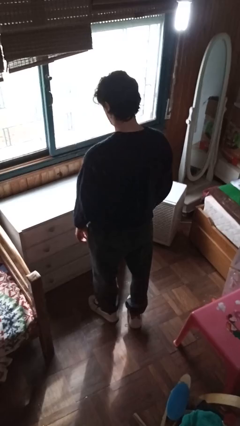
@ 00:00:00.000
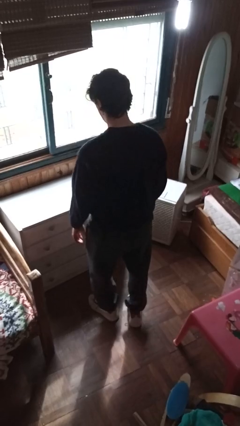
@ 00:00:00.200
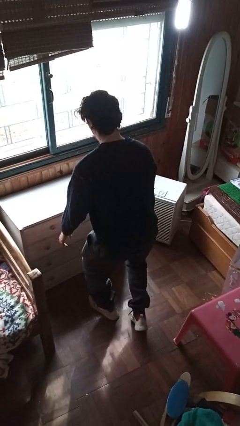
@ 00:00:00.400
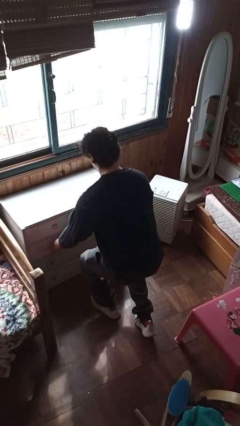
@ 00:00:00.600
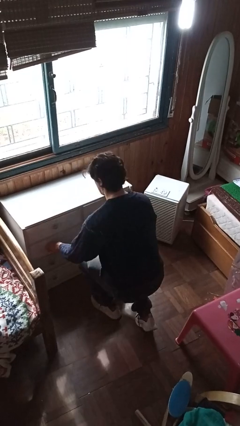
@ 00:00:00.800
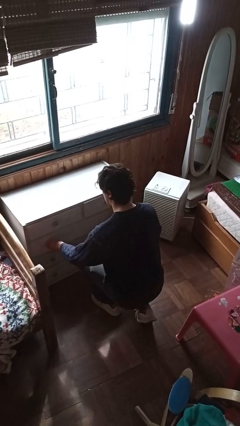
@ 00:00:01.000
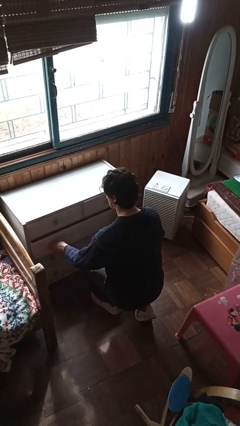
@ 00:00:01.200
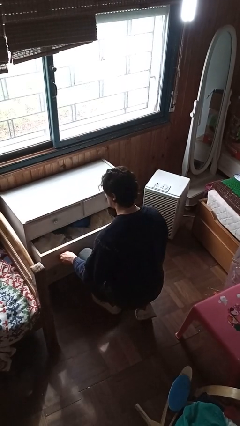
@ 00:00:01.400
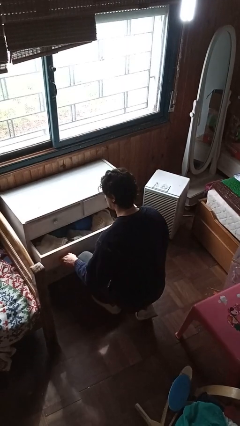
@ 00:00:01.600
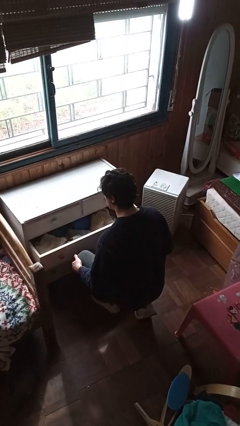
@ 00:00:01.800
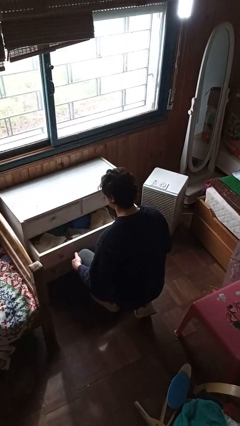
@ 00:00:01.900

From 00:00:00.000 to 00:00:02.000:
person opens dresser drawer

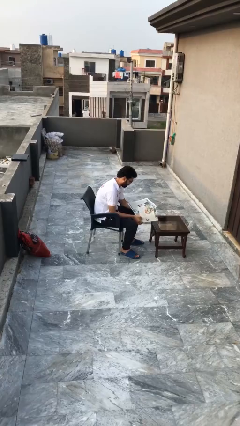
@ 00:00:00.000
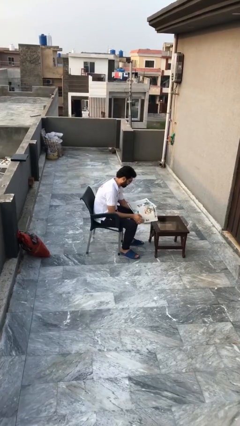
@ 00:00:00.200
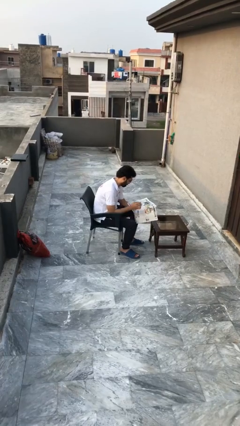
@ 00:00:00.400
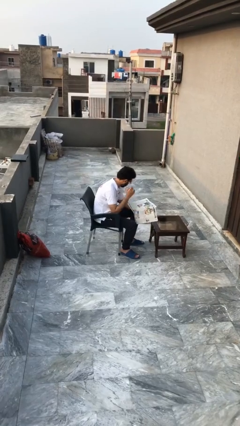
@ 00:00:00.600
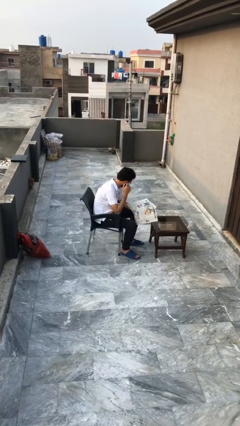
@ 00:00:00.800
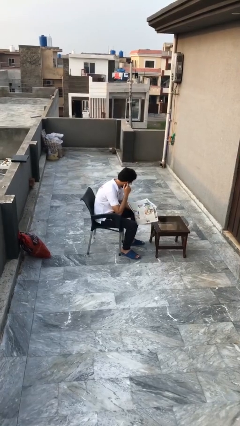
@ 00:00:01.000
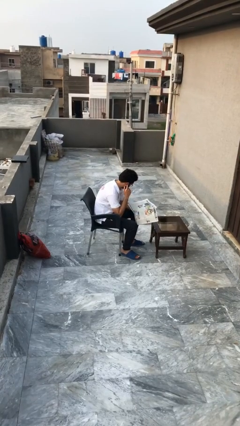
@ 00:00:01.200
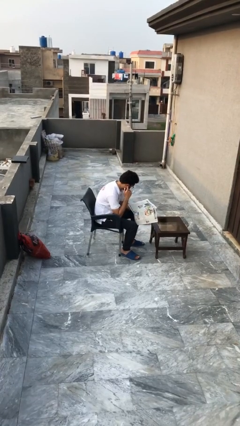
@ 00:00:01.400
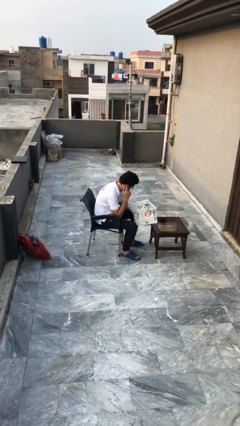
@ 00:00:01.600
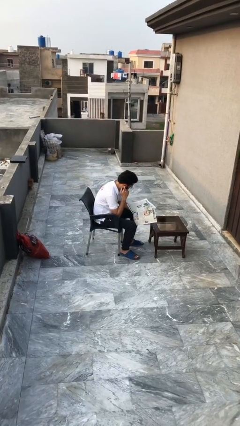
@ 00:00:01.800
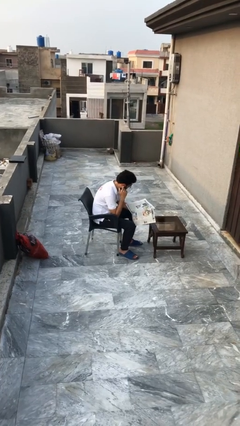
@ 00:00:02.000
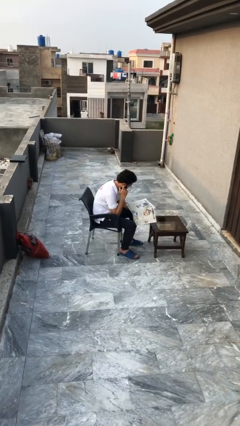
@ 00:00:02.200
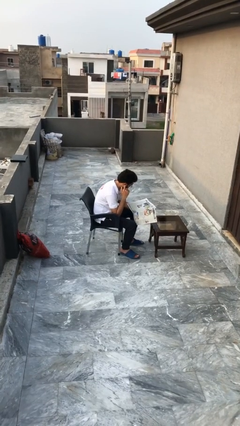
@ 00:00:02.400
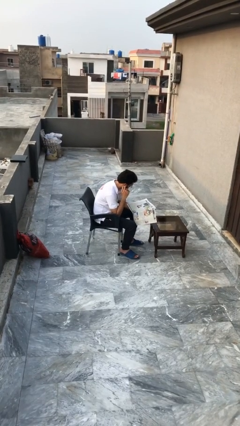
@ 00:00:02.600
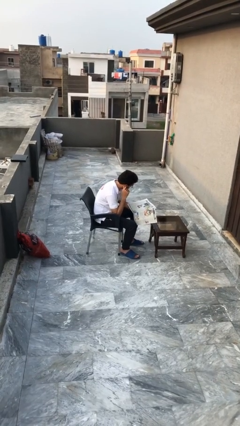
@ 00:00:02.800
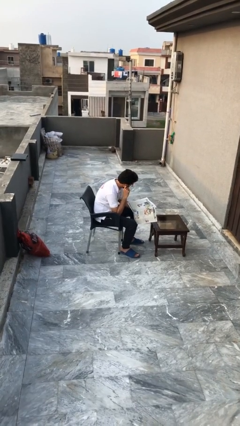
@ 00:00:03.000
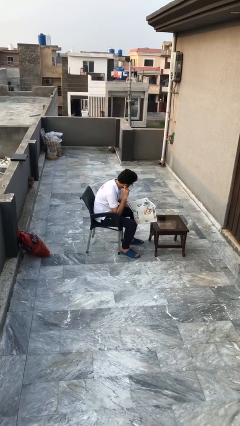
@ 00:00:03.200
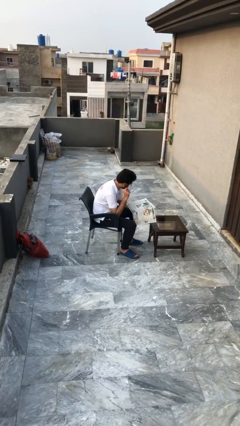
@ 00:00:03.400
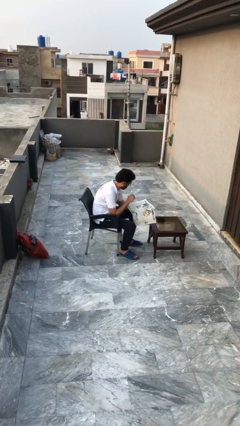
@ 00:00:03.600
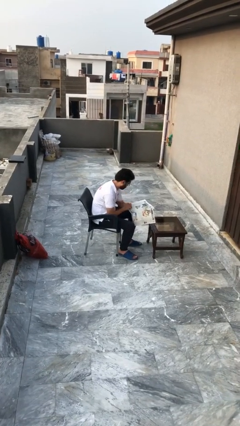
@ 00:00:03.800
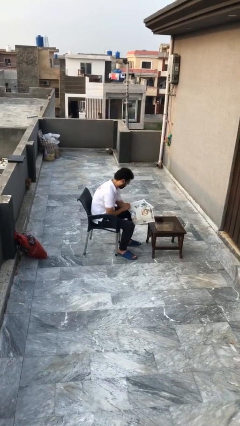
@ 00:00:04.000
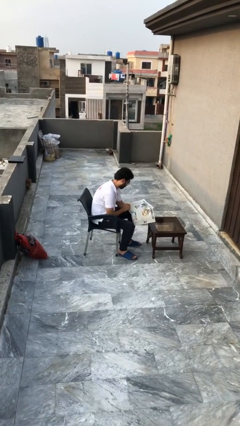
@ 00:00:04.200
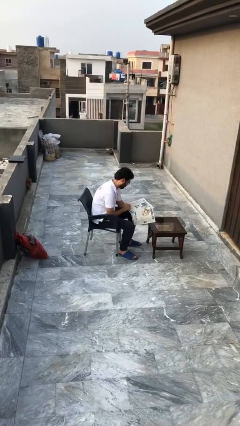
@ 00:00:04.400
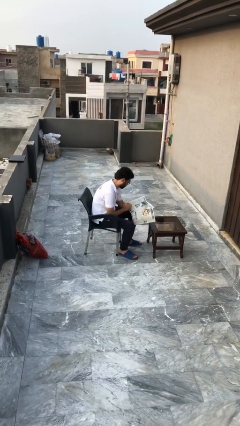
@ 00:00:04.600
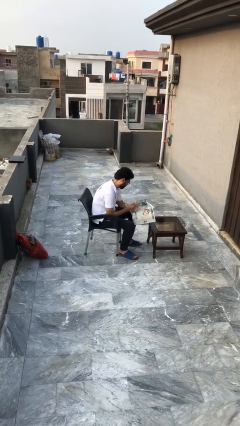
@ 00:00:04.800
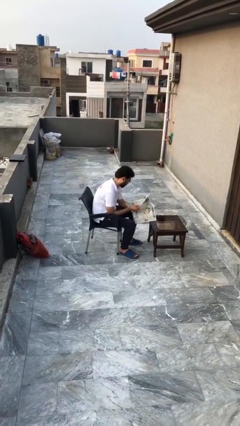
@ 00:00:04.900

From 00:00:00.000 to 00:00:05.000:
person reads document

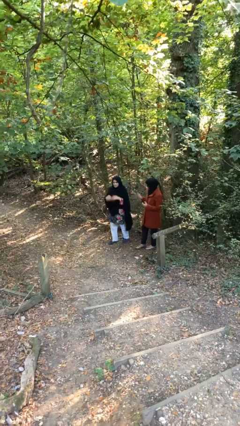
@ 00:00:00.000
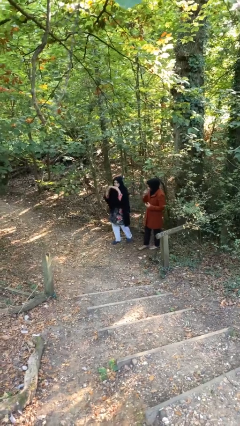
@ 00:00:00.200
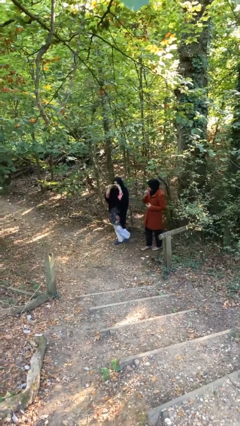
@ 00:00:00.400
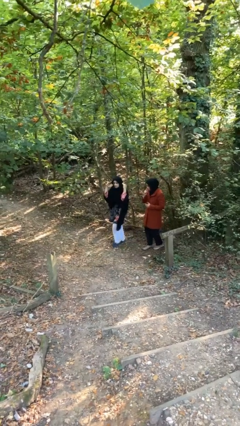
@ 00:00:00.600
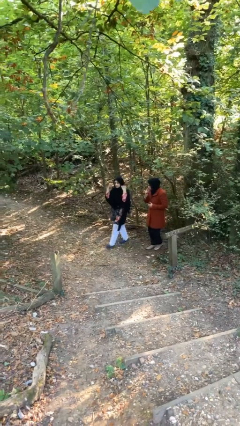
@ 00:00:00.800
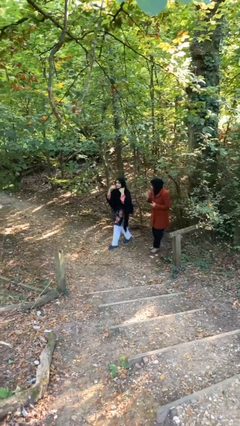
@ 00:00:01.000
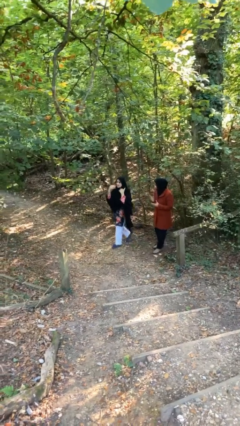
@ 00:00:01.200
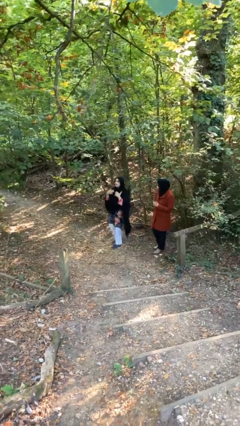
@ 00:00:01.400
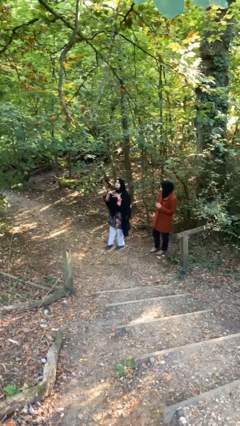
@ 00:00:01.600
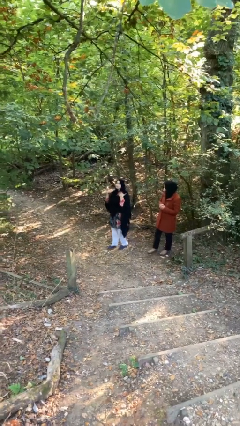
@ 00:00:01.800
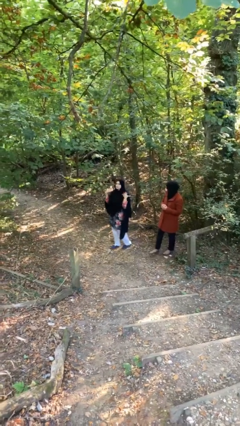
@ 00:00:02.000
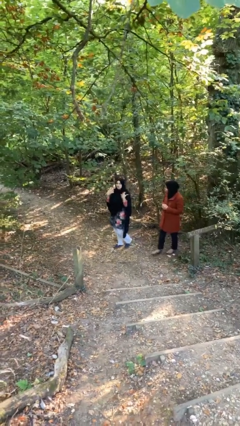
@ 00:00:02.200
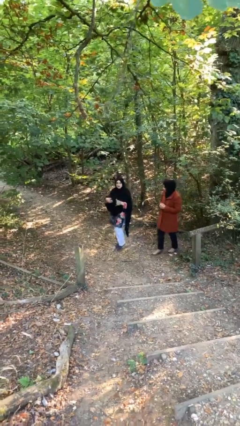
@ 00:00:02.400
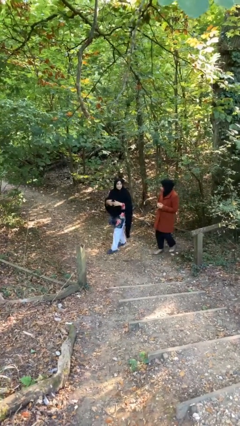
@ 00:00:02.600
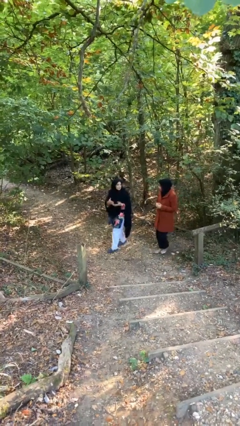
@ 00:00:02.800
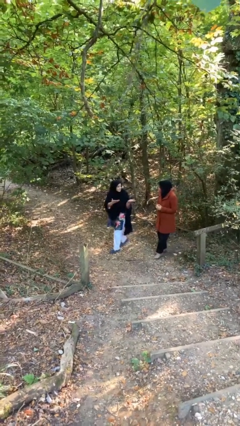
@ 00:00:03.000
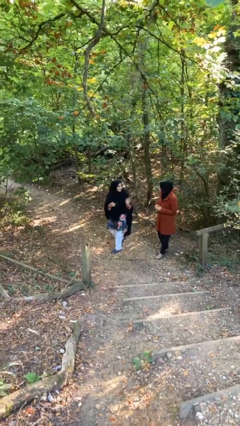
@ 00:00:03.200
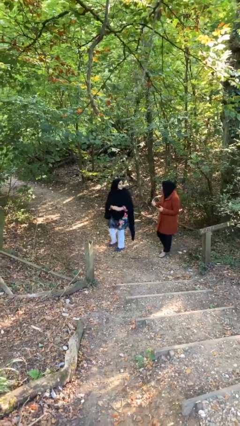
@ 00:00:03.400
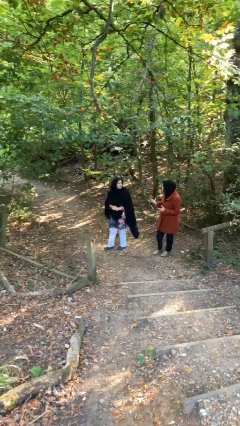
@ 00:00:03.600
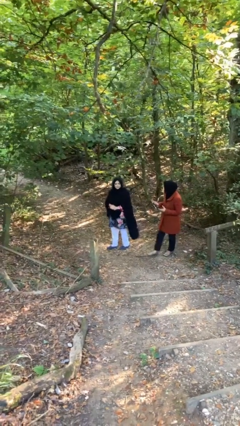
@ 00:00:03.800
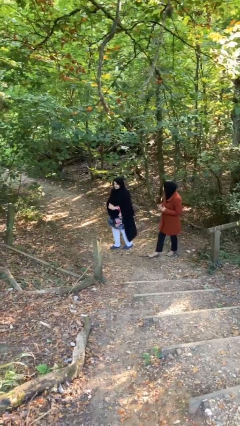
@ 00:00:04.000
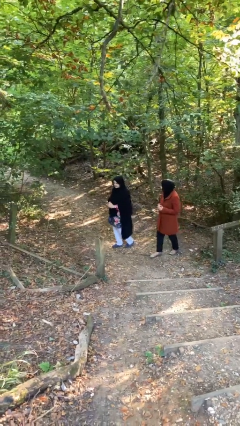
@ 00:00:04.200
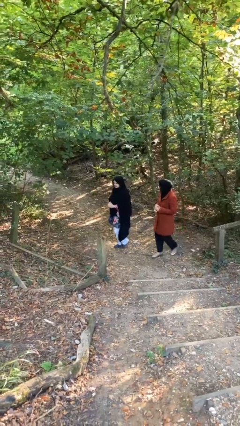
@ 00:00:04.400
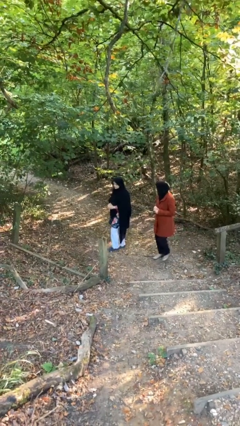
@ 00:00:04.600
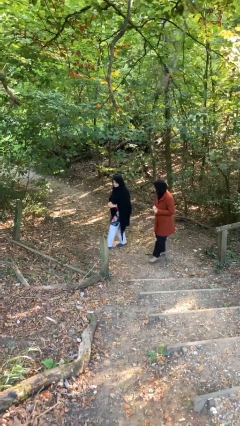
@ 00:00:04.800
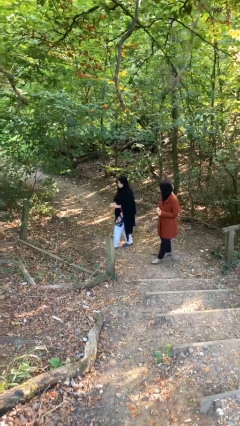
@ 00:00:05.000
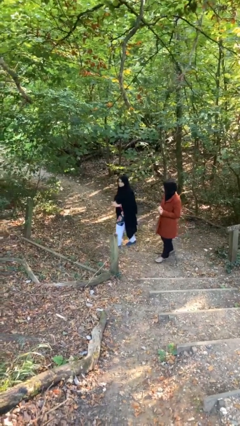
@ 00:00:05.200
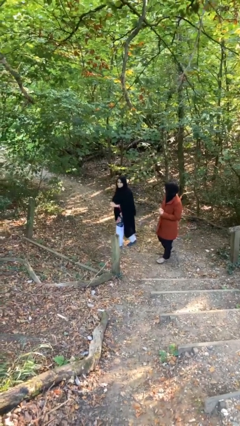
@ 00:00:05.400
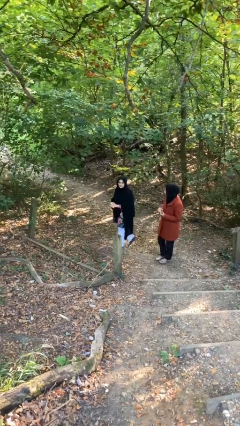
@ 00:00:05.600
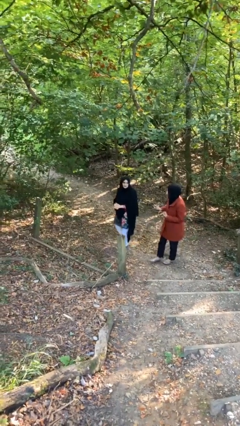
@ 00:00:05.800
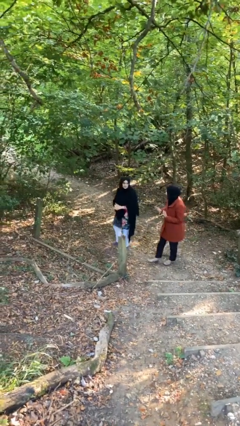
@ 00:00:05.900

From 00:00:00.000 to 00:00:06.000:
person talks to person

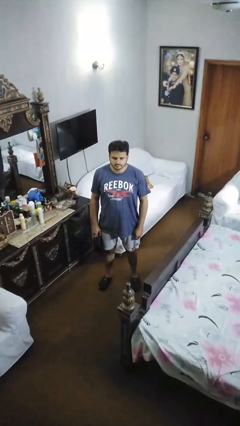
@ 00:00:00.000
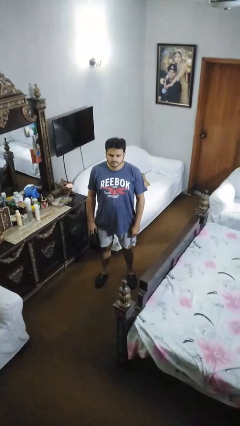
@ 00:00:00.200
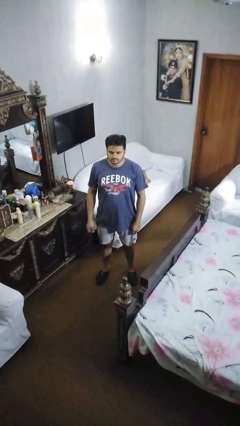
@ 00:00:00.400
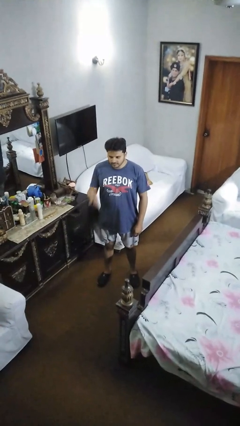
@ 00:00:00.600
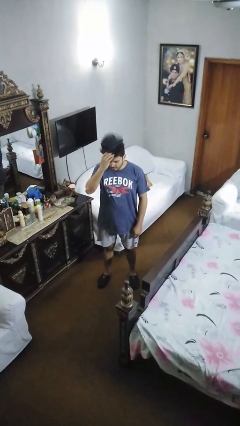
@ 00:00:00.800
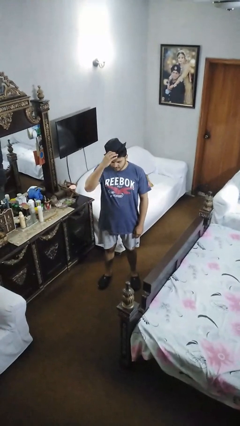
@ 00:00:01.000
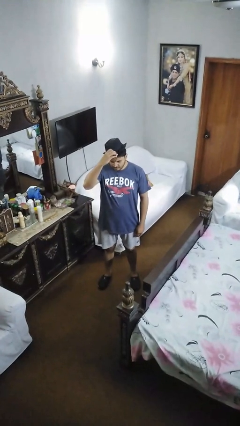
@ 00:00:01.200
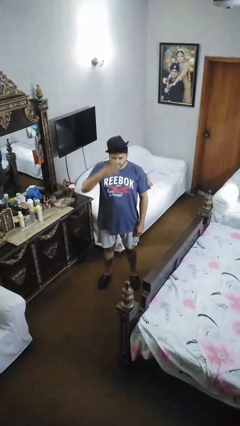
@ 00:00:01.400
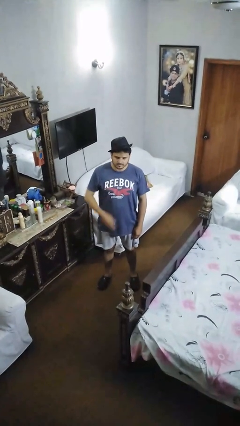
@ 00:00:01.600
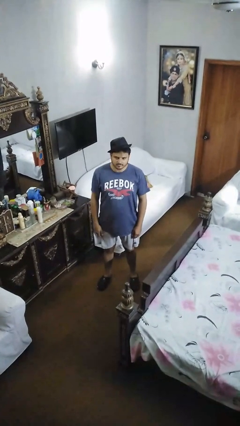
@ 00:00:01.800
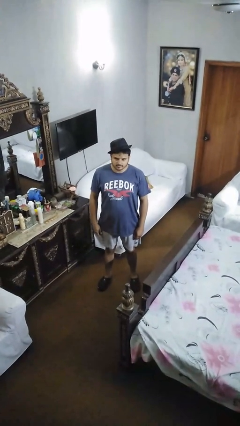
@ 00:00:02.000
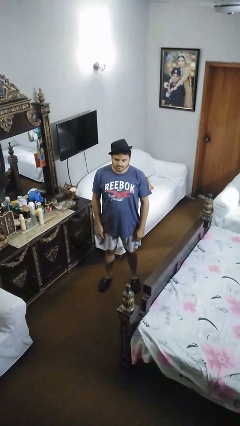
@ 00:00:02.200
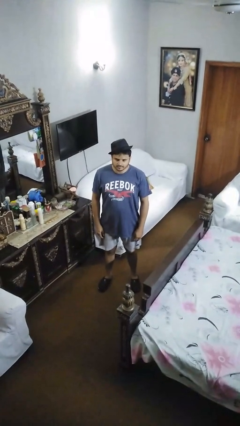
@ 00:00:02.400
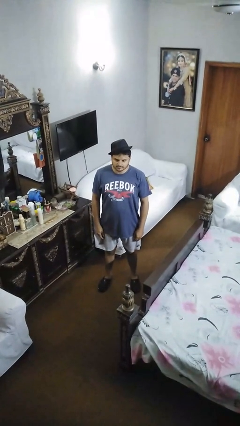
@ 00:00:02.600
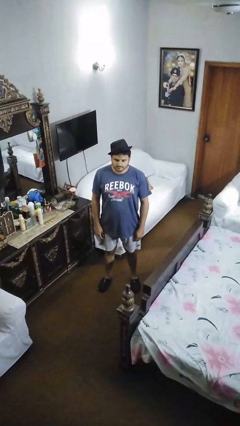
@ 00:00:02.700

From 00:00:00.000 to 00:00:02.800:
person puts on hat

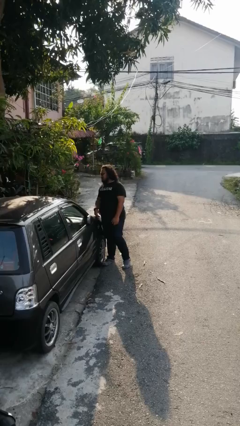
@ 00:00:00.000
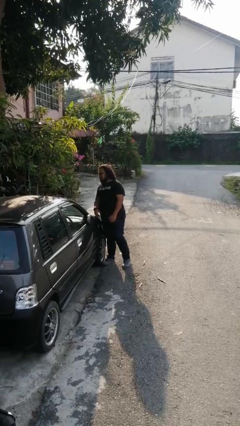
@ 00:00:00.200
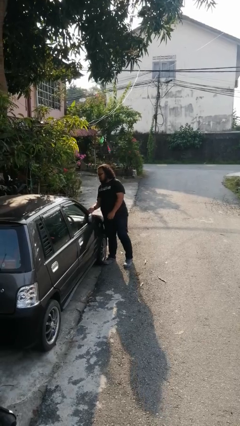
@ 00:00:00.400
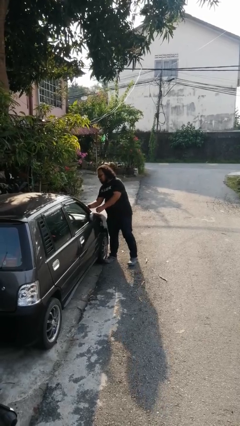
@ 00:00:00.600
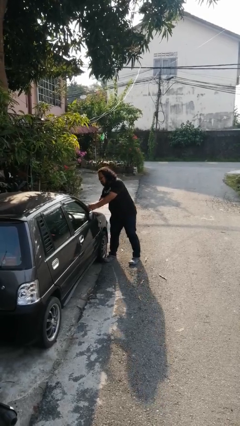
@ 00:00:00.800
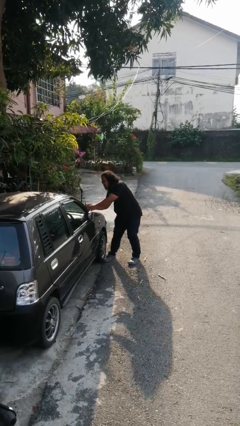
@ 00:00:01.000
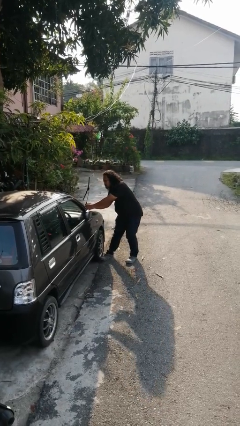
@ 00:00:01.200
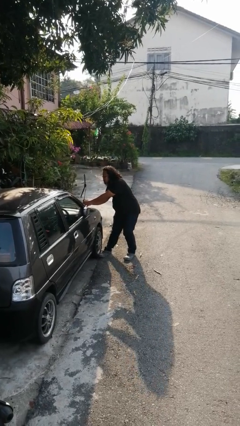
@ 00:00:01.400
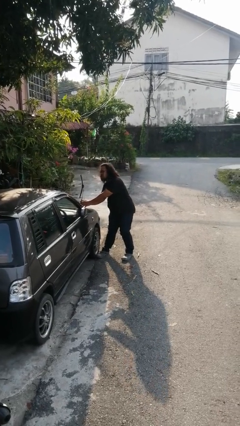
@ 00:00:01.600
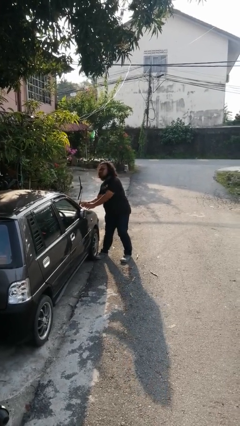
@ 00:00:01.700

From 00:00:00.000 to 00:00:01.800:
person flips up car wipers
